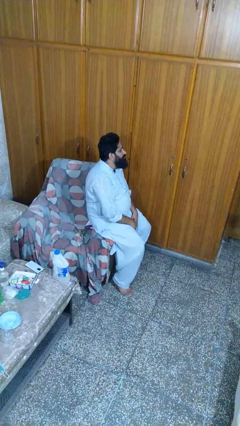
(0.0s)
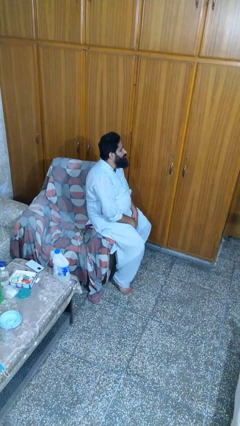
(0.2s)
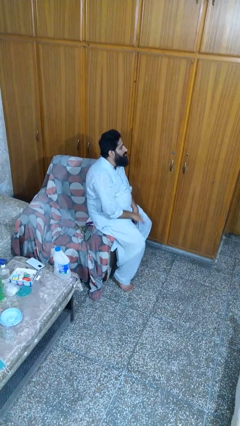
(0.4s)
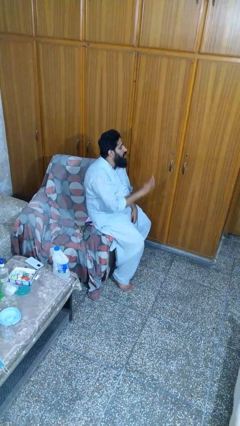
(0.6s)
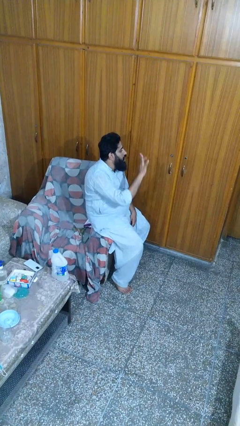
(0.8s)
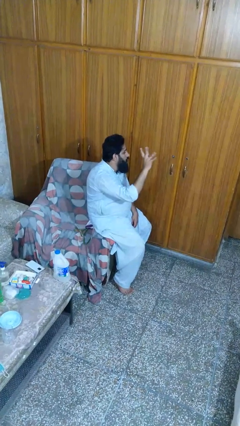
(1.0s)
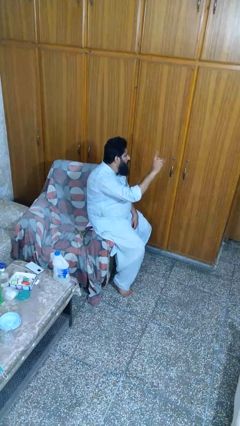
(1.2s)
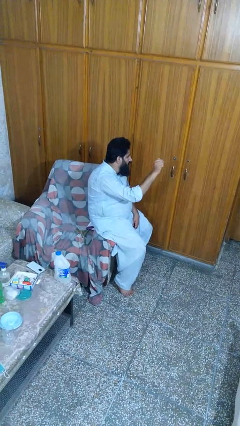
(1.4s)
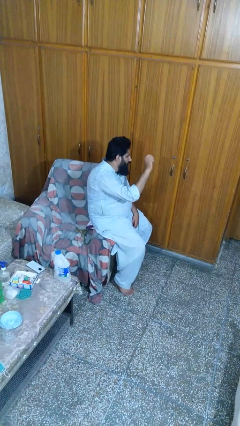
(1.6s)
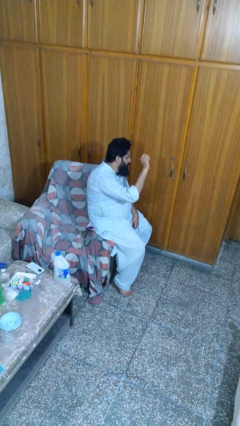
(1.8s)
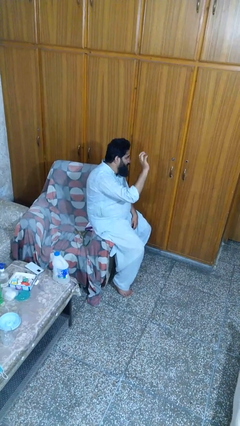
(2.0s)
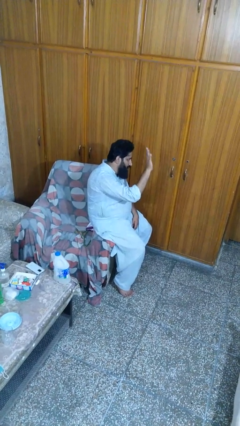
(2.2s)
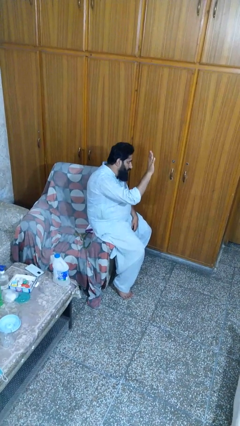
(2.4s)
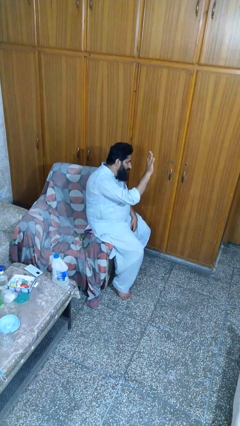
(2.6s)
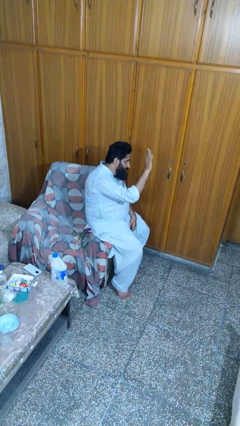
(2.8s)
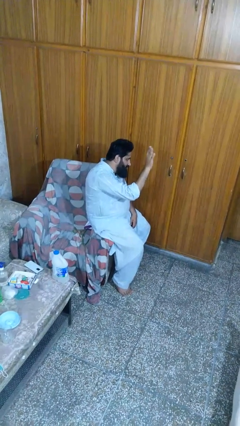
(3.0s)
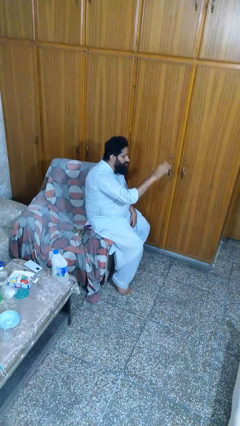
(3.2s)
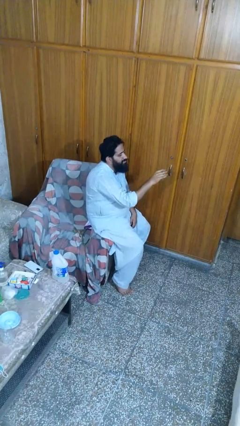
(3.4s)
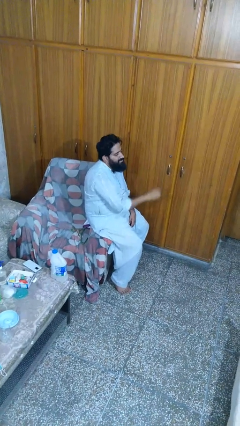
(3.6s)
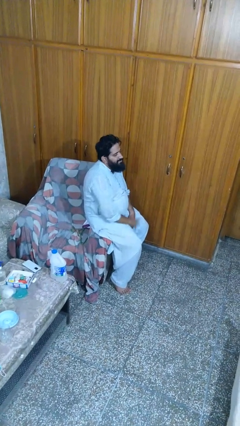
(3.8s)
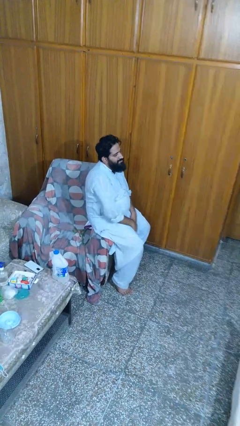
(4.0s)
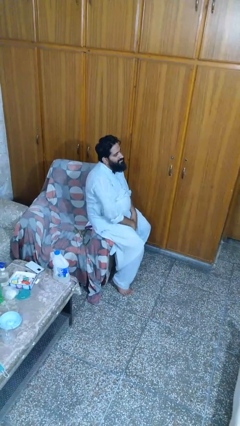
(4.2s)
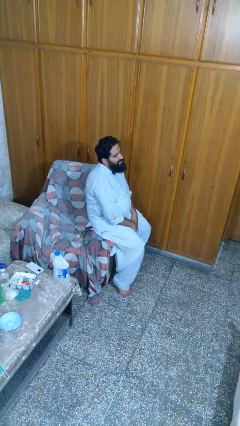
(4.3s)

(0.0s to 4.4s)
person waves at person

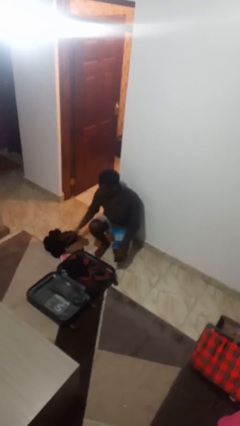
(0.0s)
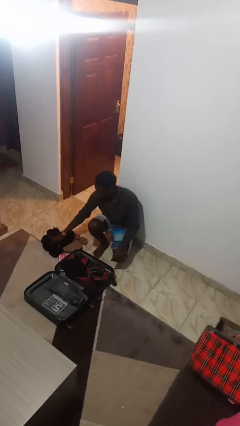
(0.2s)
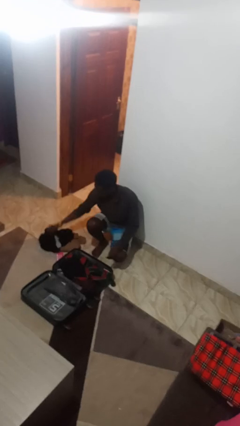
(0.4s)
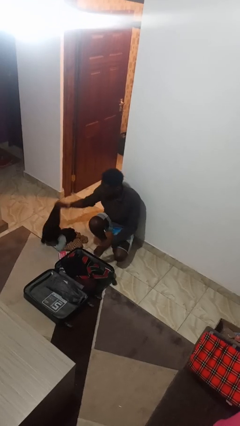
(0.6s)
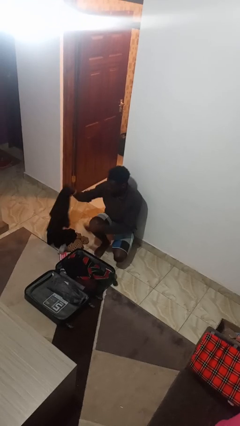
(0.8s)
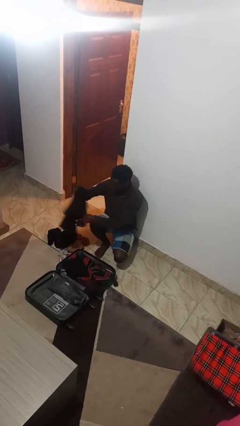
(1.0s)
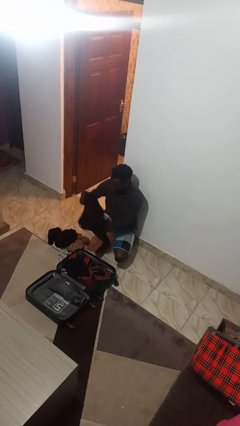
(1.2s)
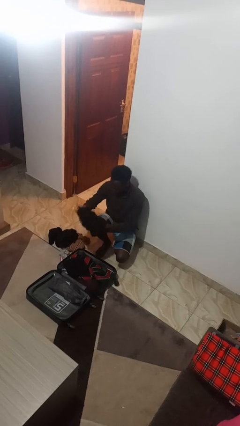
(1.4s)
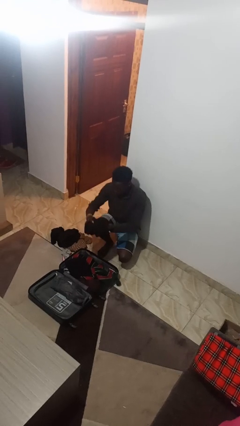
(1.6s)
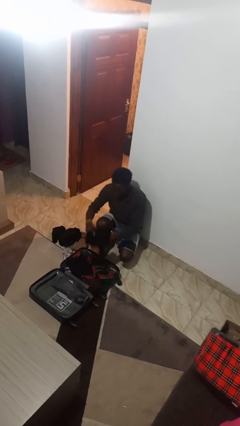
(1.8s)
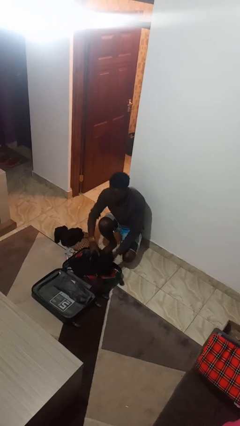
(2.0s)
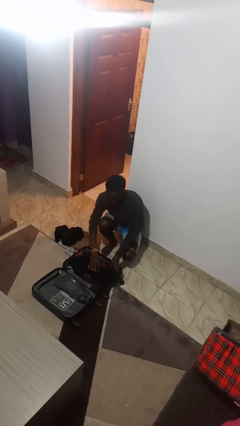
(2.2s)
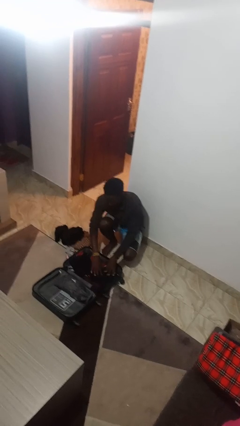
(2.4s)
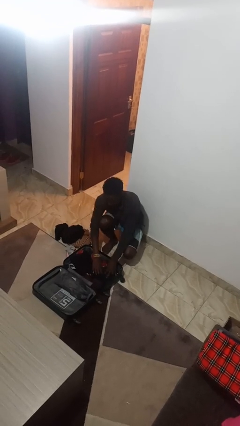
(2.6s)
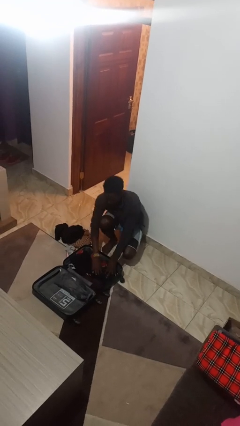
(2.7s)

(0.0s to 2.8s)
person loads clothes into suitcase

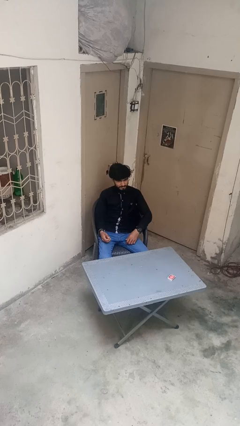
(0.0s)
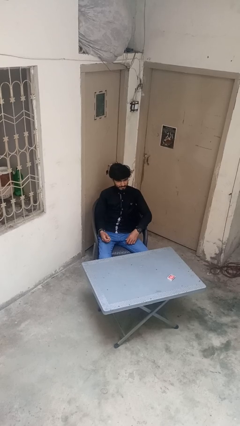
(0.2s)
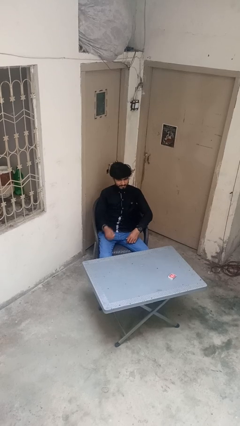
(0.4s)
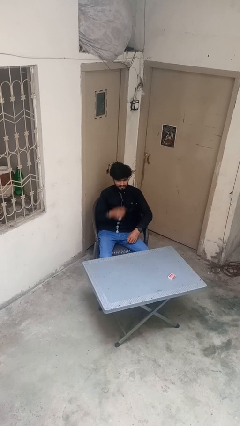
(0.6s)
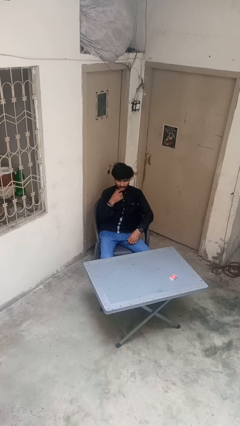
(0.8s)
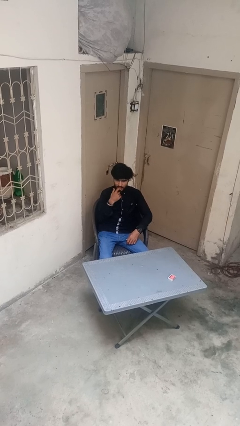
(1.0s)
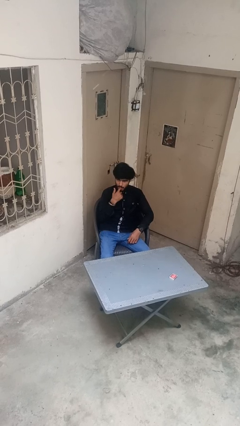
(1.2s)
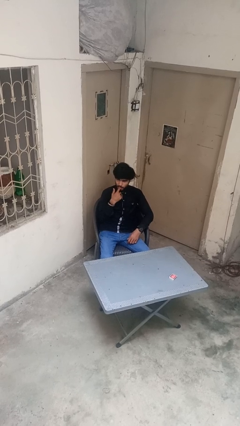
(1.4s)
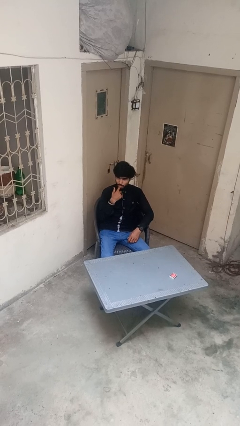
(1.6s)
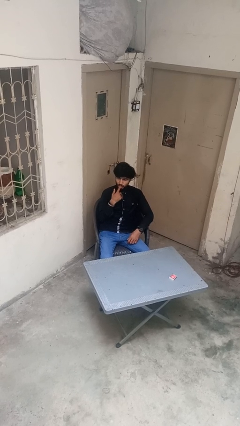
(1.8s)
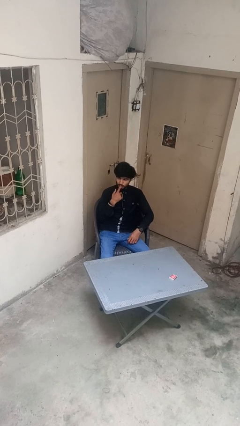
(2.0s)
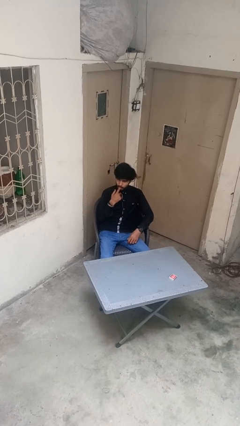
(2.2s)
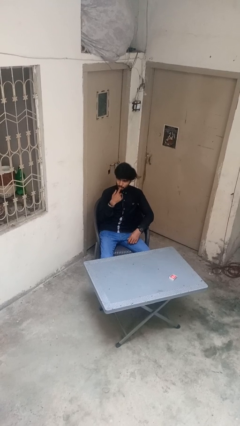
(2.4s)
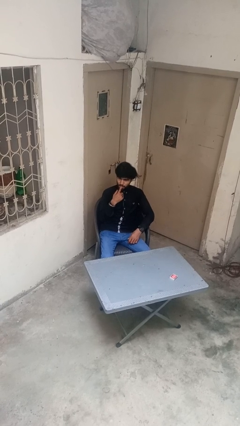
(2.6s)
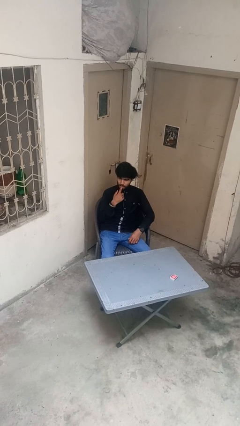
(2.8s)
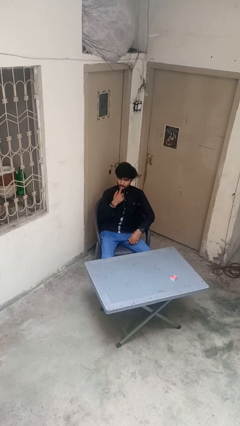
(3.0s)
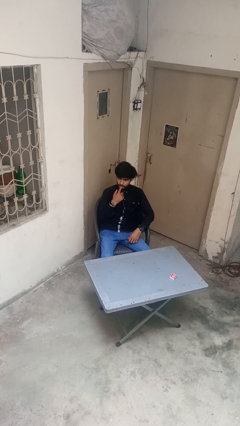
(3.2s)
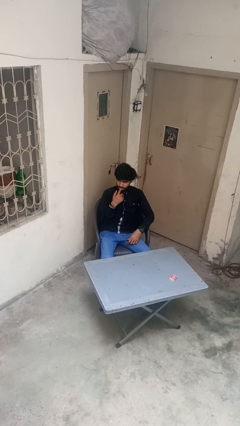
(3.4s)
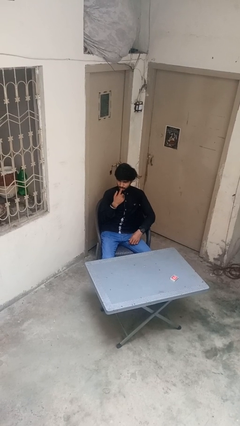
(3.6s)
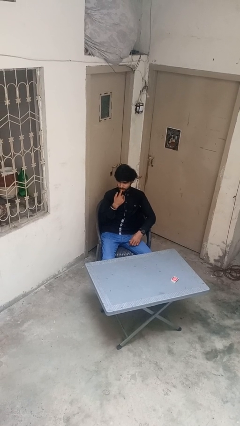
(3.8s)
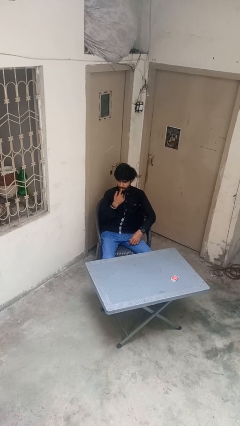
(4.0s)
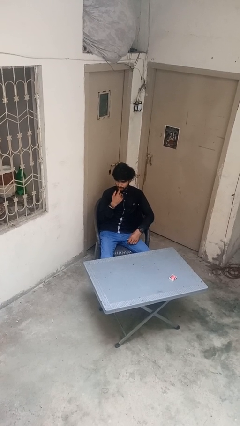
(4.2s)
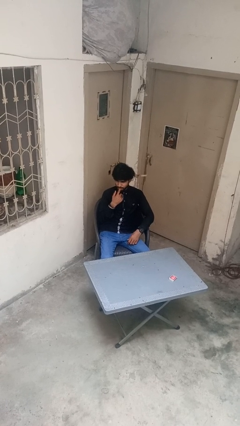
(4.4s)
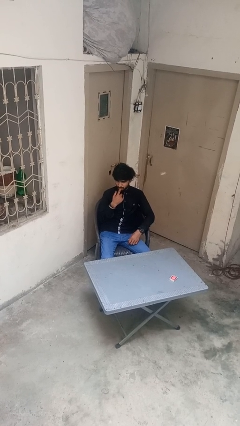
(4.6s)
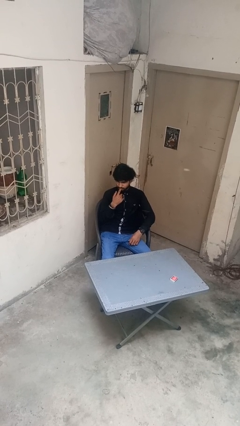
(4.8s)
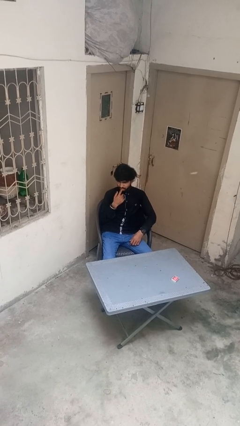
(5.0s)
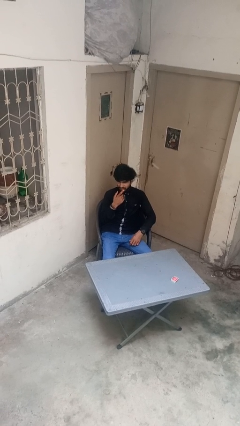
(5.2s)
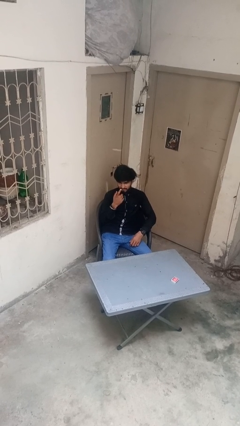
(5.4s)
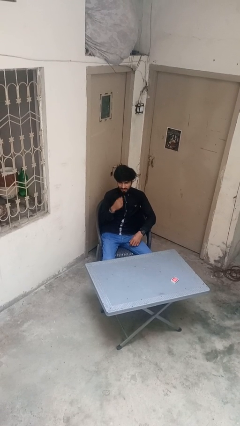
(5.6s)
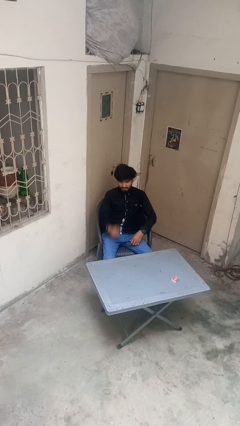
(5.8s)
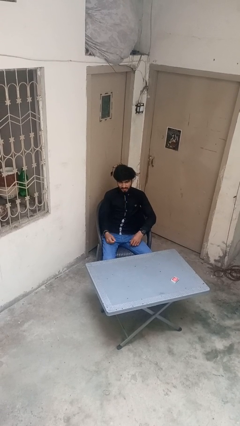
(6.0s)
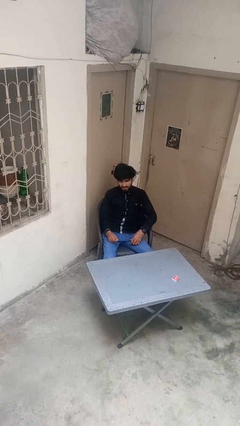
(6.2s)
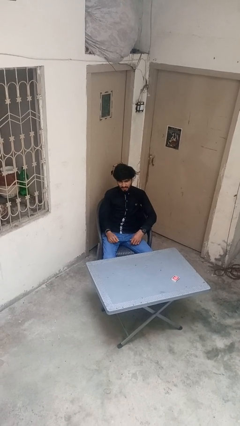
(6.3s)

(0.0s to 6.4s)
person licks fingers

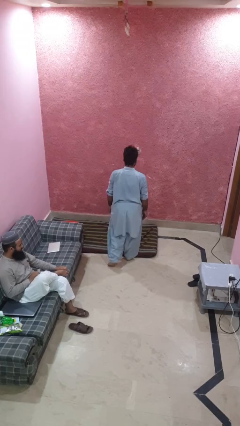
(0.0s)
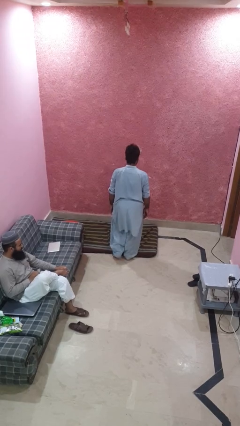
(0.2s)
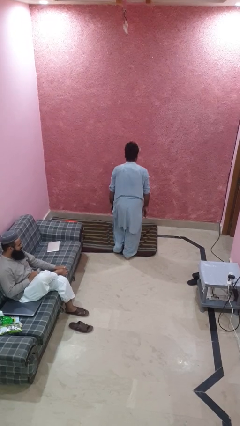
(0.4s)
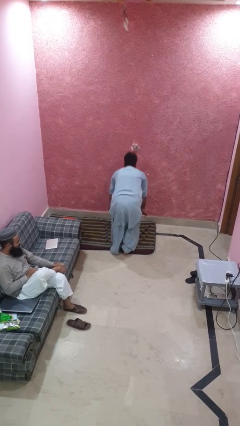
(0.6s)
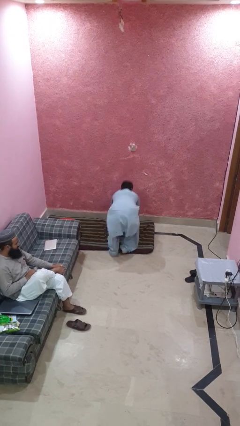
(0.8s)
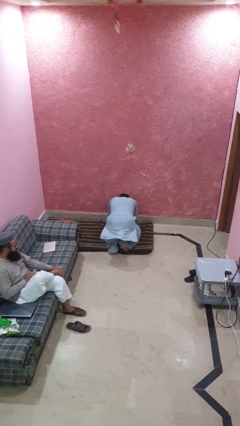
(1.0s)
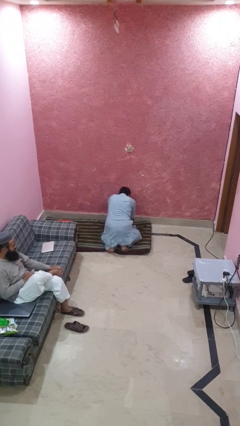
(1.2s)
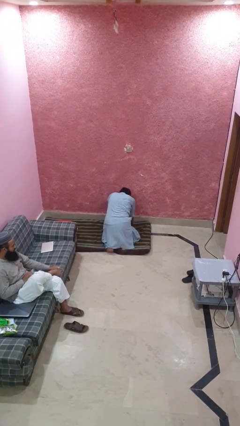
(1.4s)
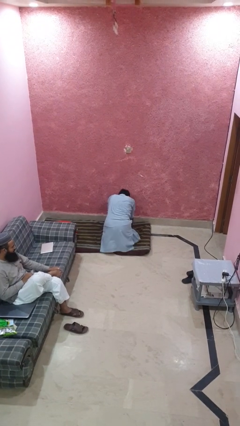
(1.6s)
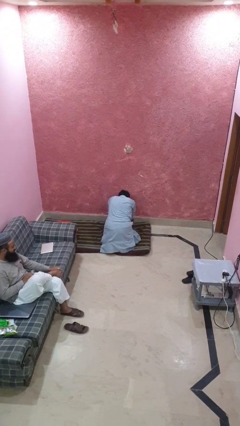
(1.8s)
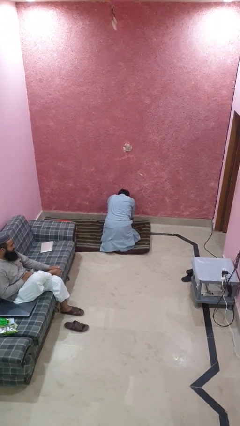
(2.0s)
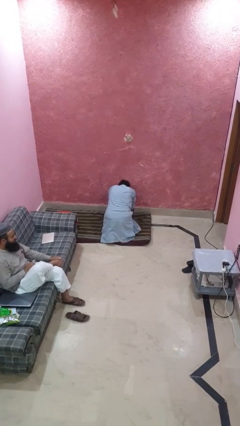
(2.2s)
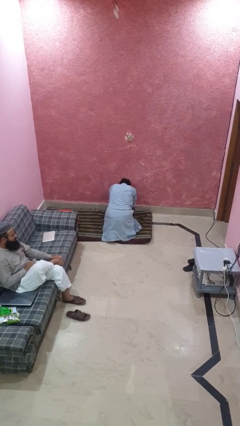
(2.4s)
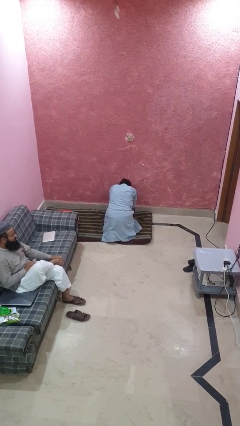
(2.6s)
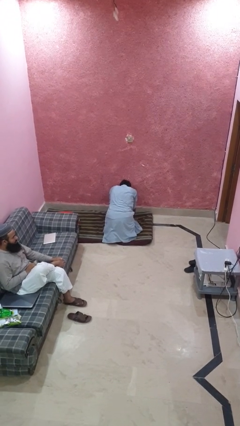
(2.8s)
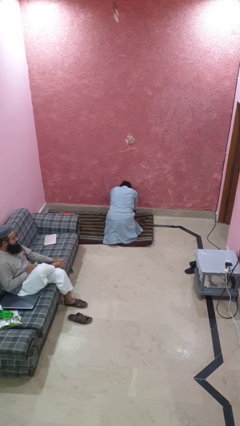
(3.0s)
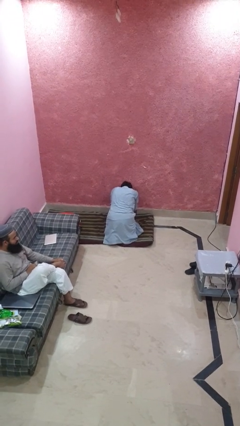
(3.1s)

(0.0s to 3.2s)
person trips on object on floor

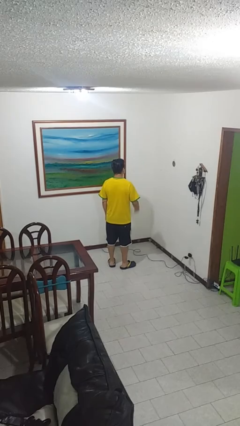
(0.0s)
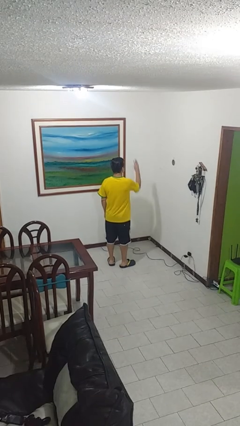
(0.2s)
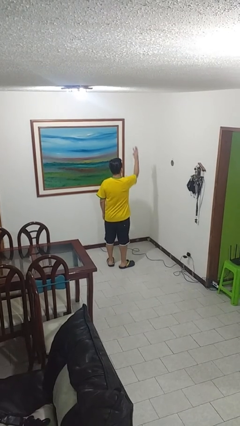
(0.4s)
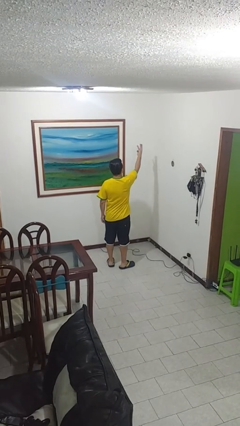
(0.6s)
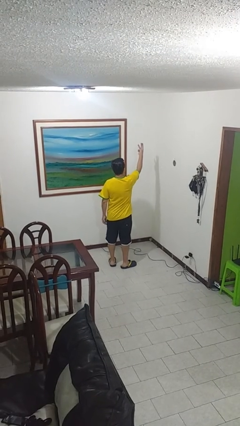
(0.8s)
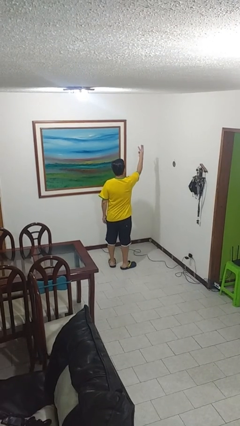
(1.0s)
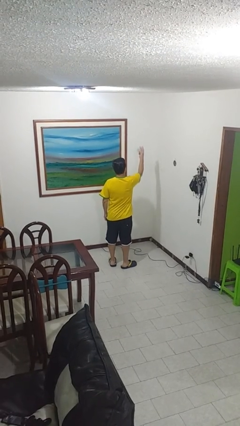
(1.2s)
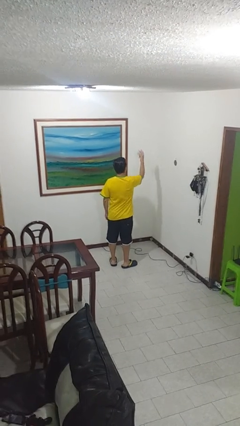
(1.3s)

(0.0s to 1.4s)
person gestures number three
